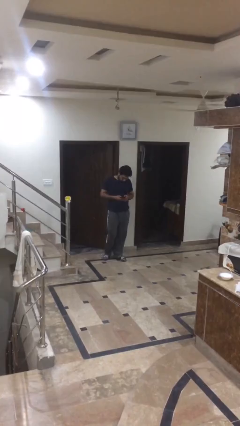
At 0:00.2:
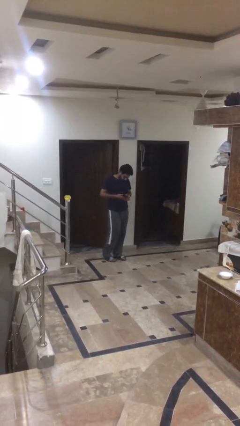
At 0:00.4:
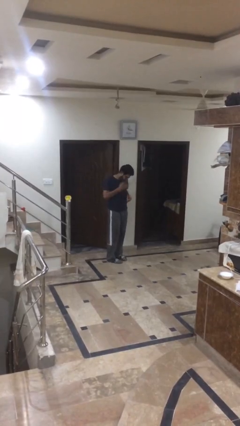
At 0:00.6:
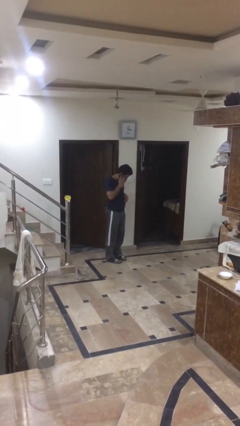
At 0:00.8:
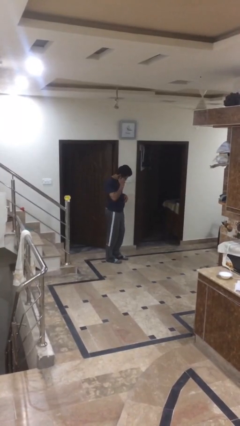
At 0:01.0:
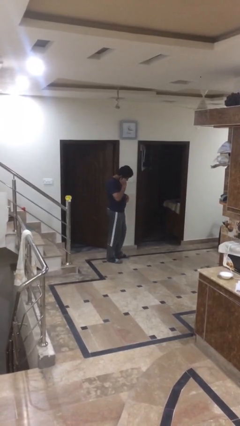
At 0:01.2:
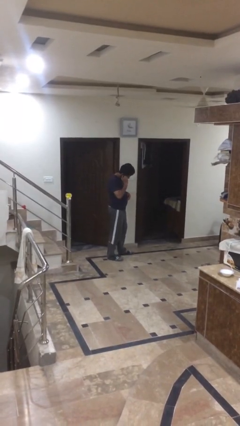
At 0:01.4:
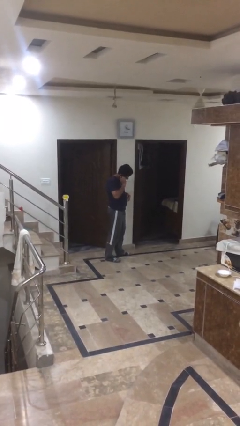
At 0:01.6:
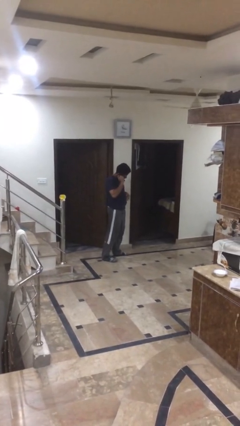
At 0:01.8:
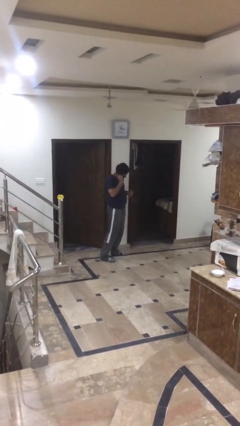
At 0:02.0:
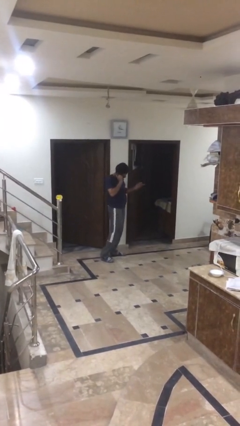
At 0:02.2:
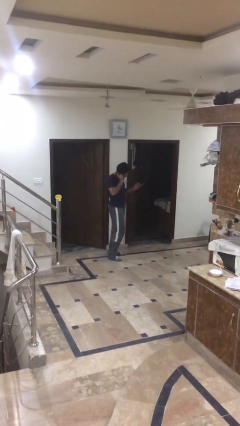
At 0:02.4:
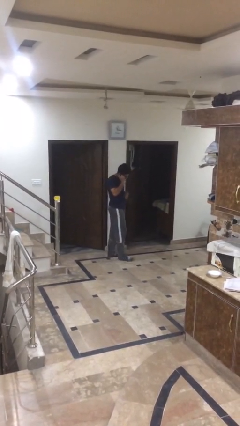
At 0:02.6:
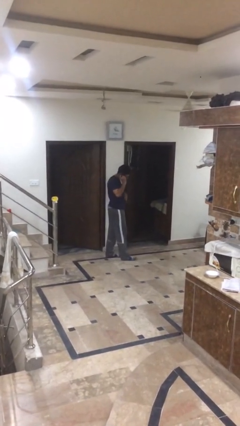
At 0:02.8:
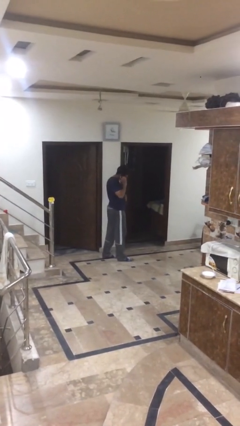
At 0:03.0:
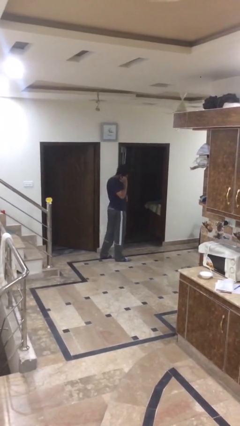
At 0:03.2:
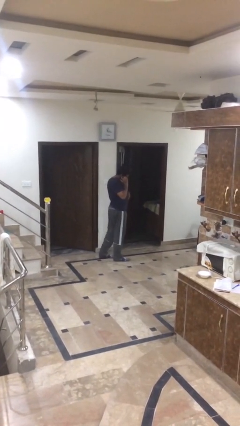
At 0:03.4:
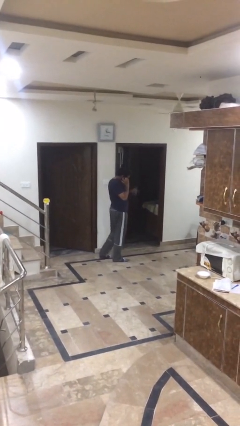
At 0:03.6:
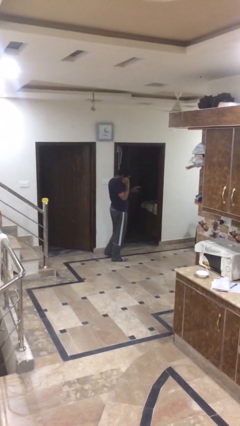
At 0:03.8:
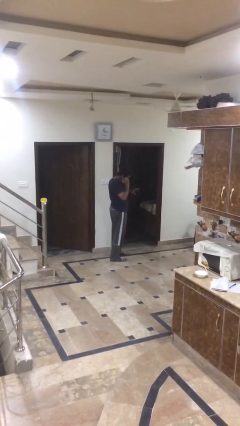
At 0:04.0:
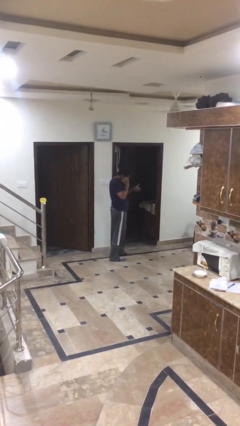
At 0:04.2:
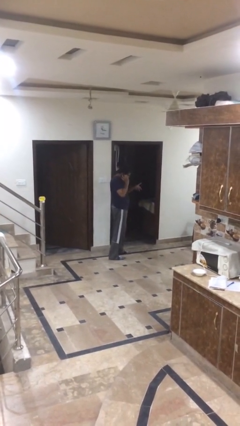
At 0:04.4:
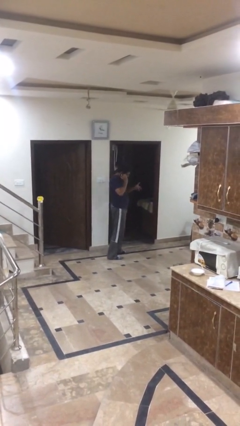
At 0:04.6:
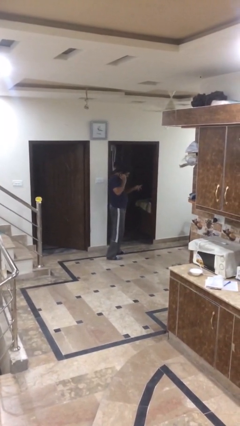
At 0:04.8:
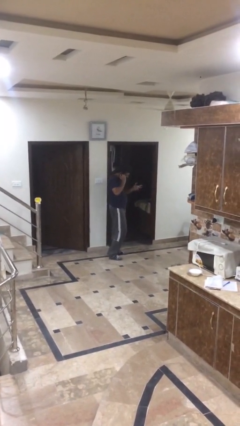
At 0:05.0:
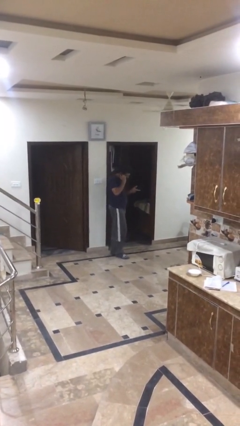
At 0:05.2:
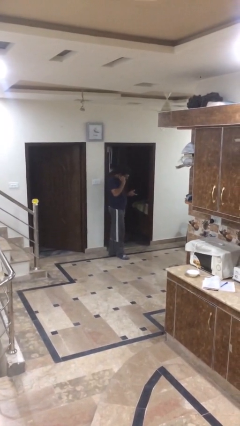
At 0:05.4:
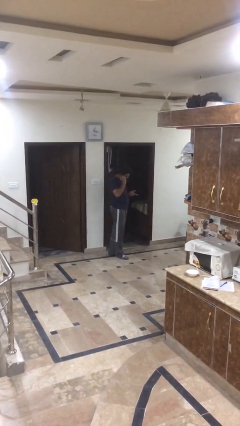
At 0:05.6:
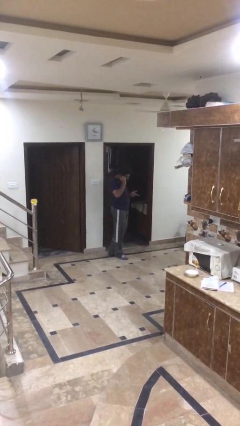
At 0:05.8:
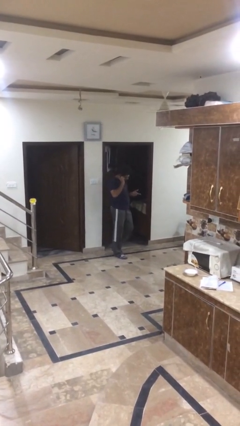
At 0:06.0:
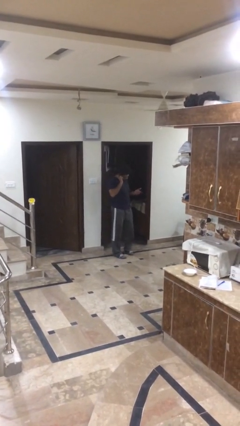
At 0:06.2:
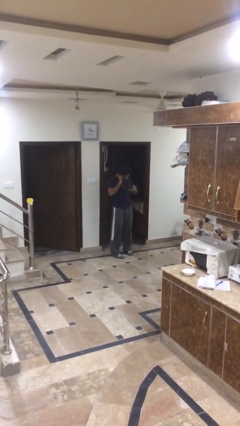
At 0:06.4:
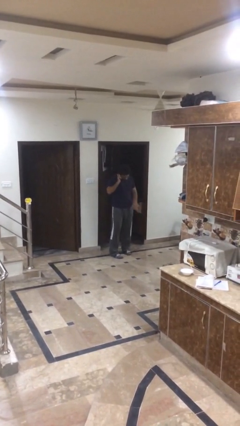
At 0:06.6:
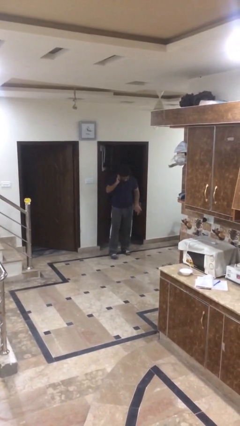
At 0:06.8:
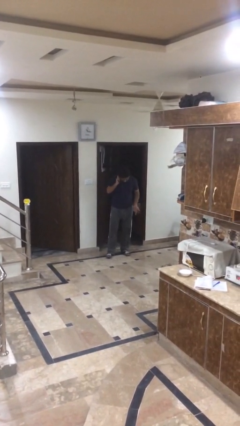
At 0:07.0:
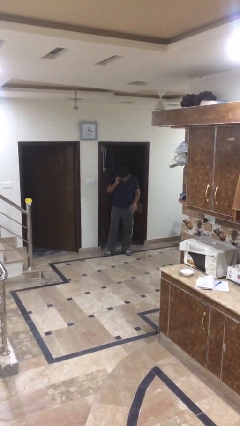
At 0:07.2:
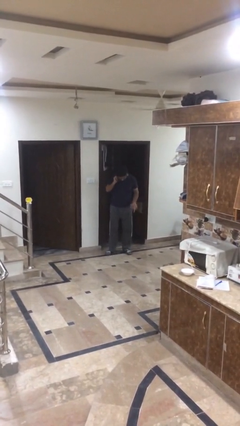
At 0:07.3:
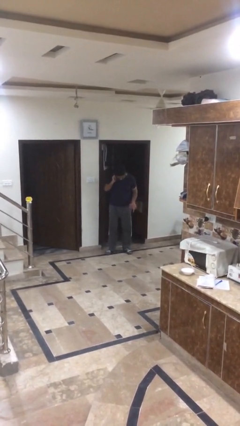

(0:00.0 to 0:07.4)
person talks on phone

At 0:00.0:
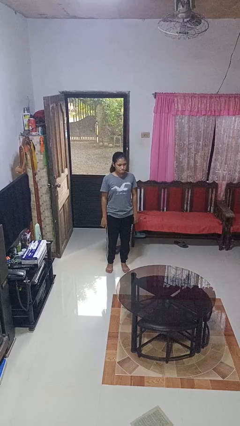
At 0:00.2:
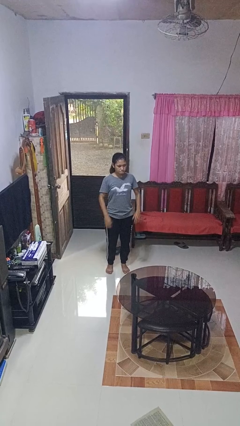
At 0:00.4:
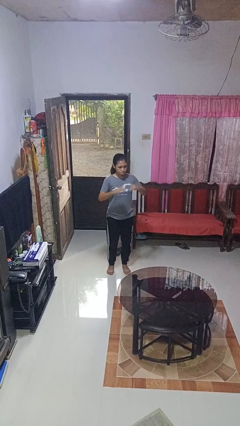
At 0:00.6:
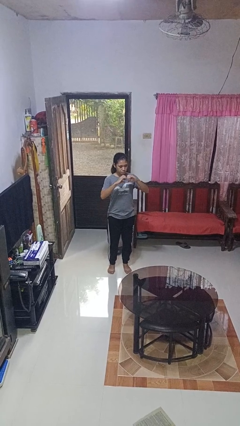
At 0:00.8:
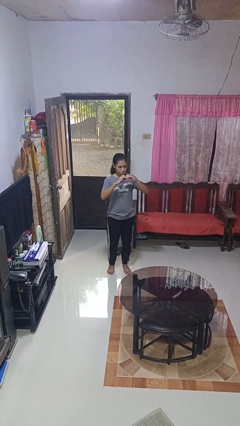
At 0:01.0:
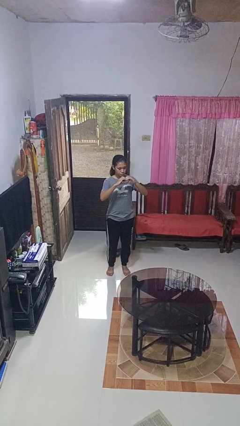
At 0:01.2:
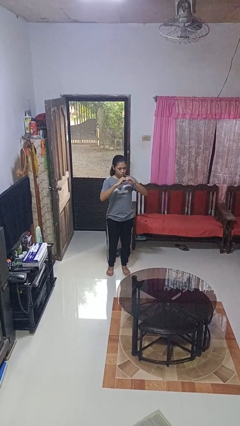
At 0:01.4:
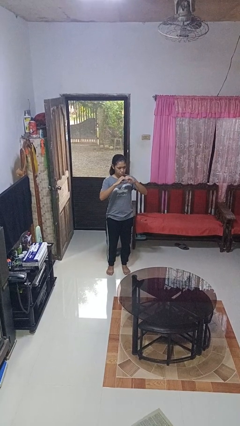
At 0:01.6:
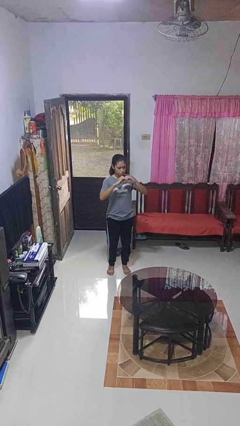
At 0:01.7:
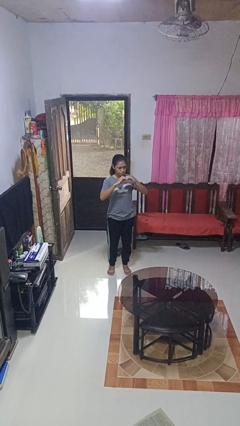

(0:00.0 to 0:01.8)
person gestures heart

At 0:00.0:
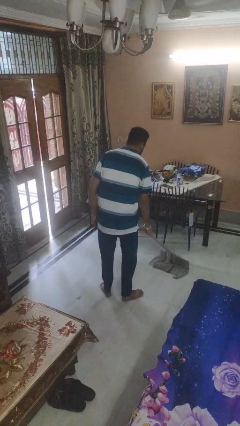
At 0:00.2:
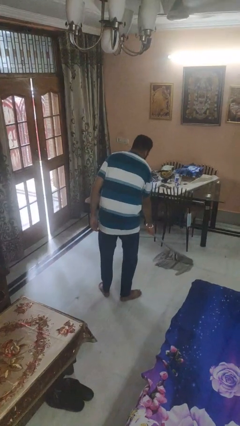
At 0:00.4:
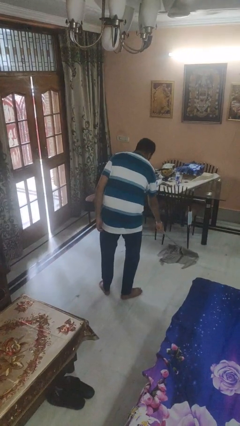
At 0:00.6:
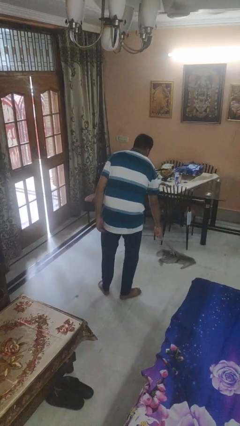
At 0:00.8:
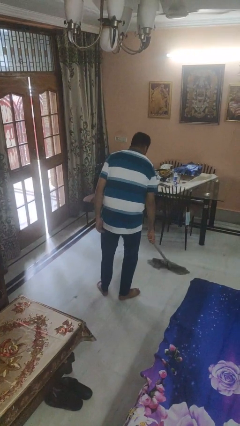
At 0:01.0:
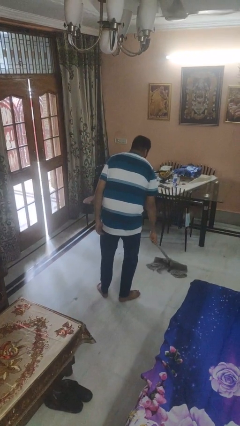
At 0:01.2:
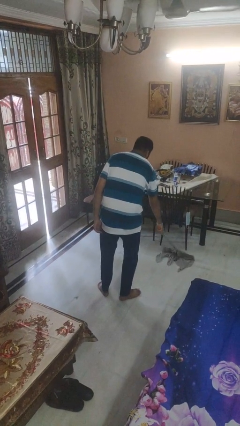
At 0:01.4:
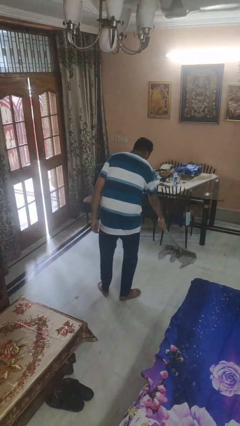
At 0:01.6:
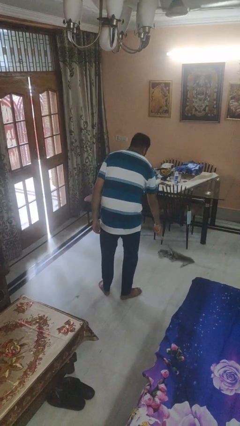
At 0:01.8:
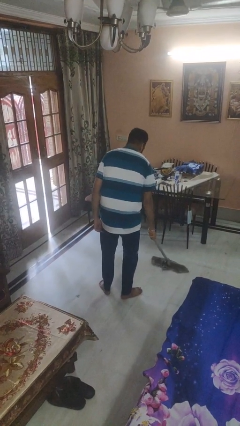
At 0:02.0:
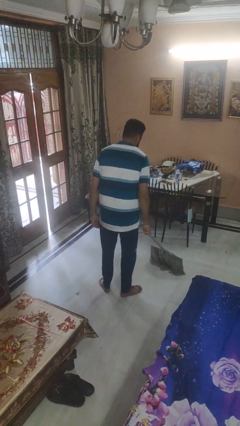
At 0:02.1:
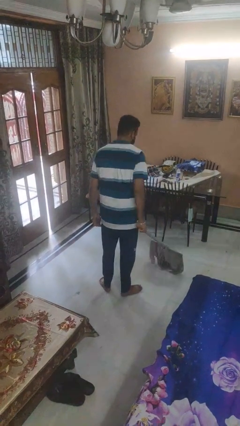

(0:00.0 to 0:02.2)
person mops

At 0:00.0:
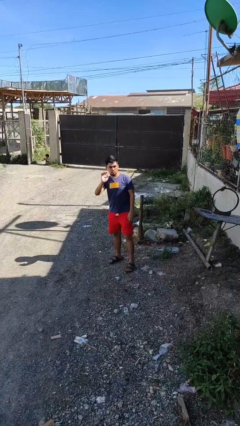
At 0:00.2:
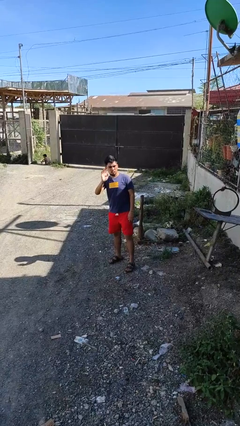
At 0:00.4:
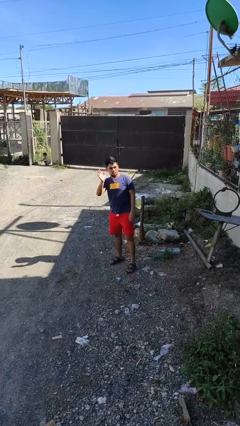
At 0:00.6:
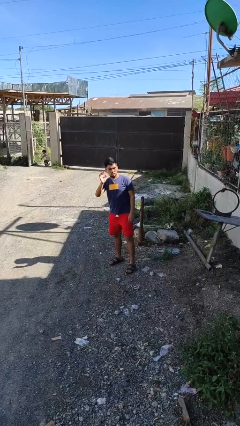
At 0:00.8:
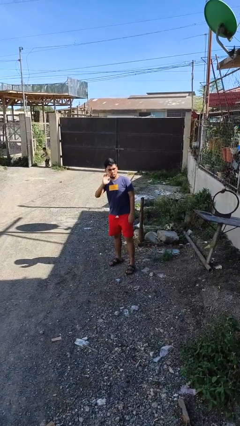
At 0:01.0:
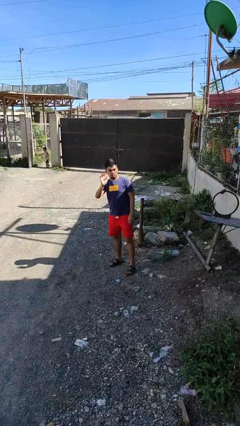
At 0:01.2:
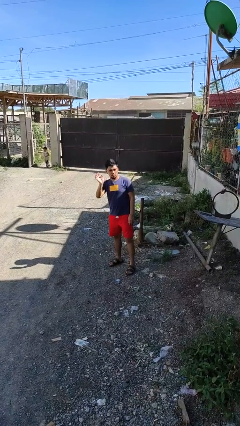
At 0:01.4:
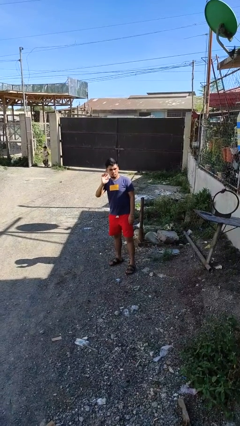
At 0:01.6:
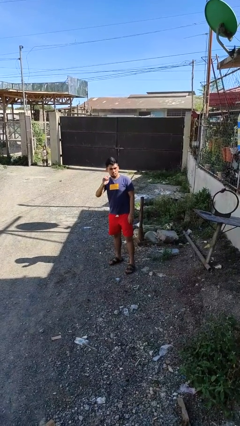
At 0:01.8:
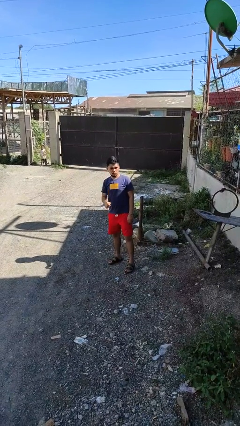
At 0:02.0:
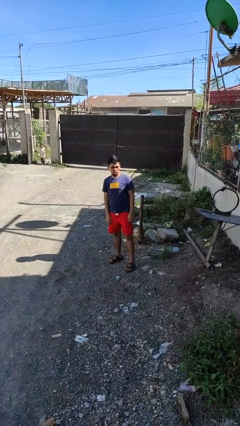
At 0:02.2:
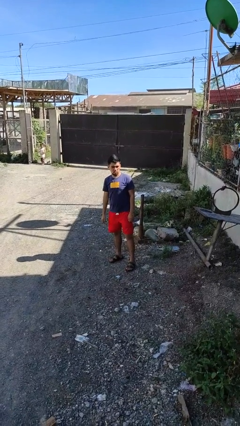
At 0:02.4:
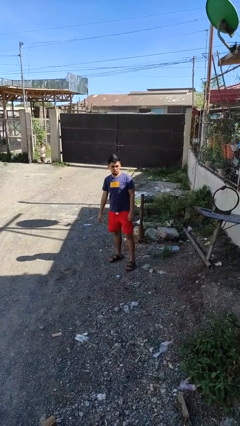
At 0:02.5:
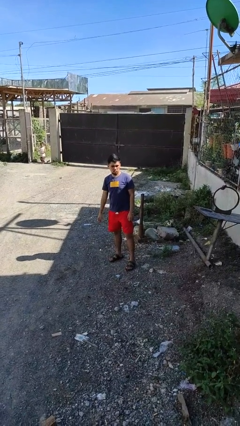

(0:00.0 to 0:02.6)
person waves at person

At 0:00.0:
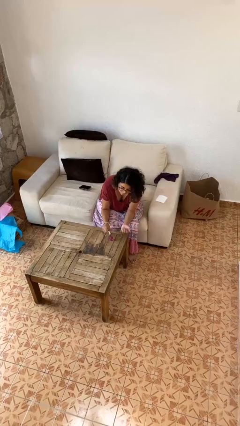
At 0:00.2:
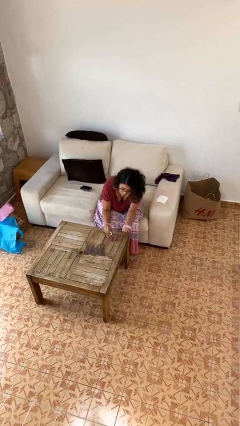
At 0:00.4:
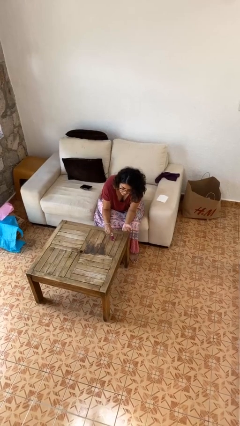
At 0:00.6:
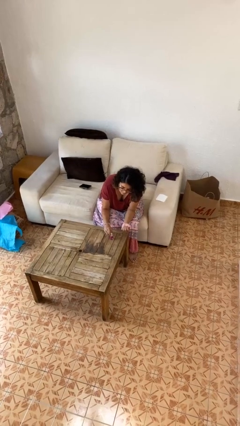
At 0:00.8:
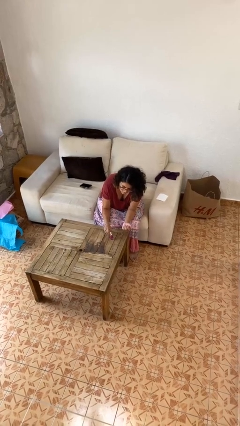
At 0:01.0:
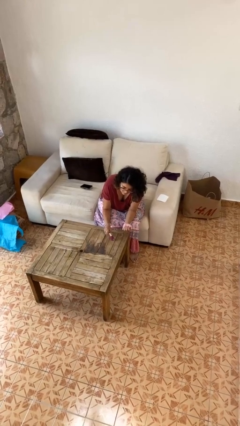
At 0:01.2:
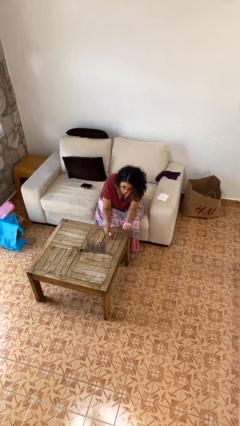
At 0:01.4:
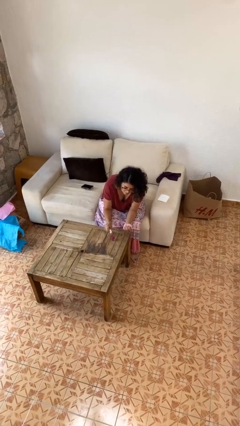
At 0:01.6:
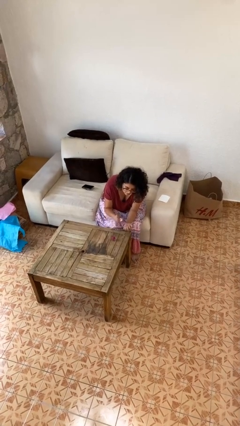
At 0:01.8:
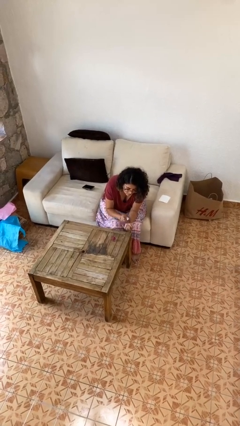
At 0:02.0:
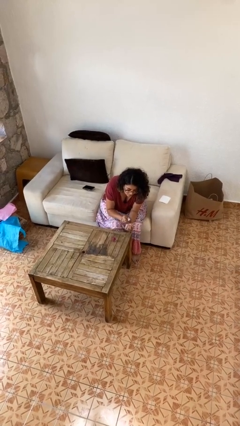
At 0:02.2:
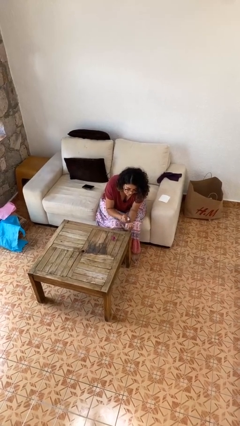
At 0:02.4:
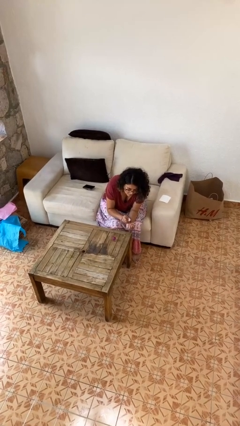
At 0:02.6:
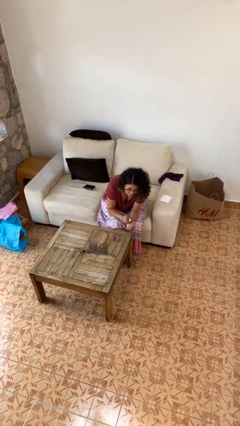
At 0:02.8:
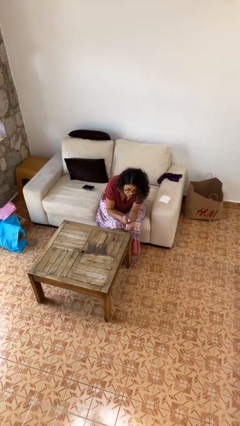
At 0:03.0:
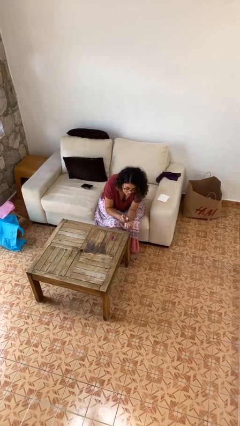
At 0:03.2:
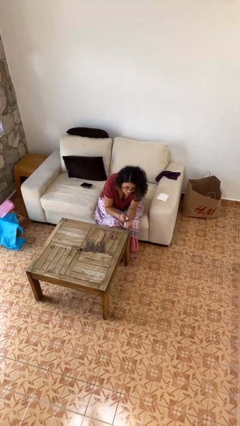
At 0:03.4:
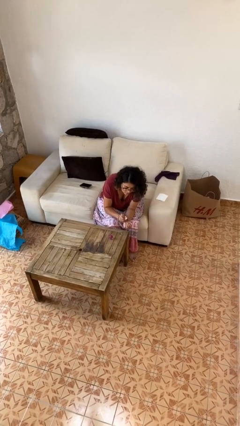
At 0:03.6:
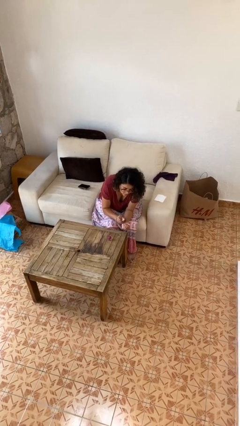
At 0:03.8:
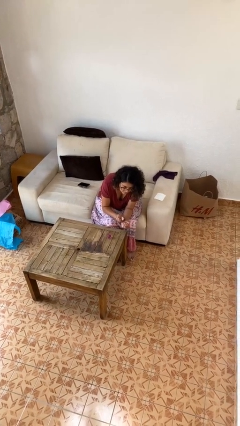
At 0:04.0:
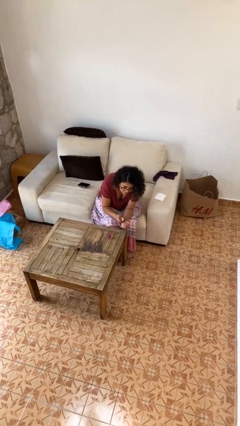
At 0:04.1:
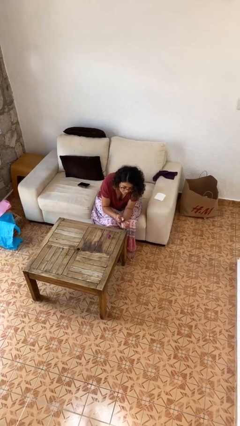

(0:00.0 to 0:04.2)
person paints fingernails
